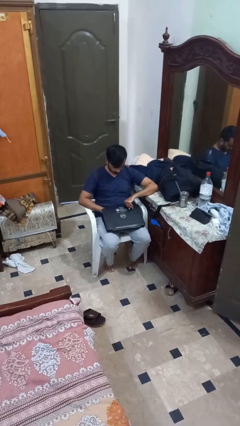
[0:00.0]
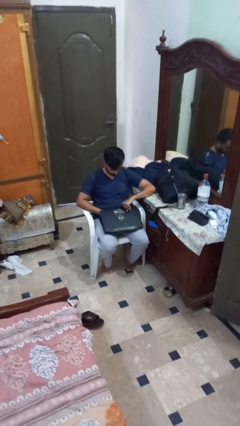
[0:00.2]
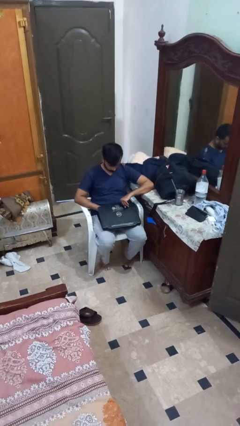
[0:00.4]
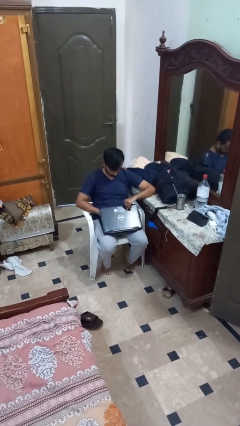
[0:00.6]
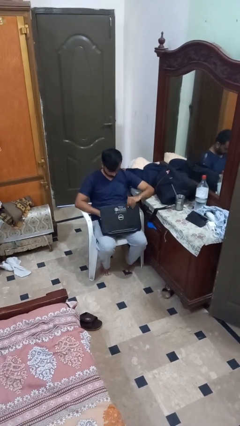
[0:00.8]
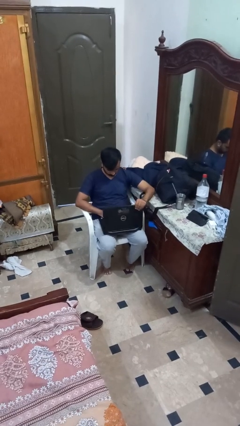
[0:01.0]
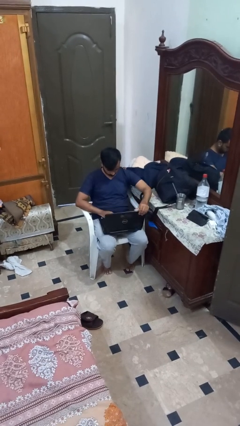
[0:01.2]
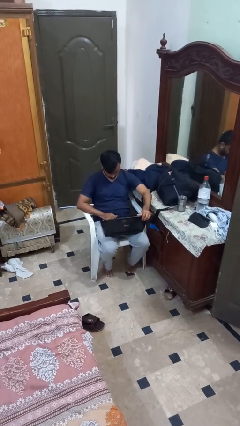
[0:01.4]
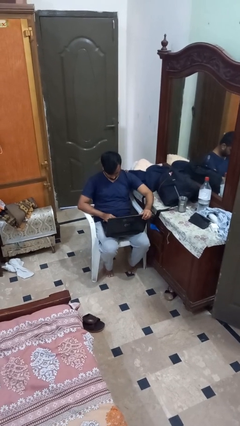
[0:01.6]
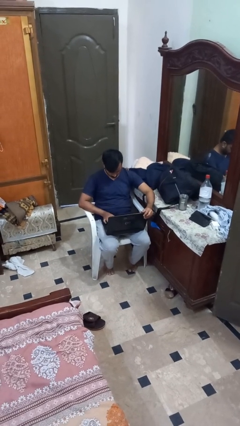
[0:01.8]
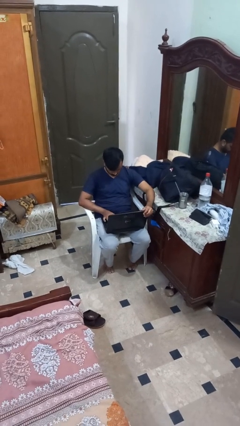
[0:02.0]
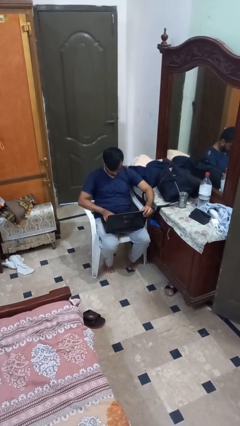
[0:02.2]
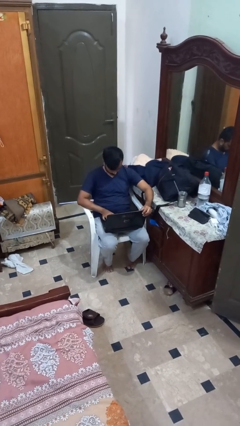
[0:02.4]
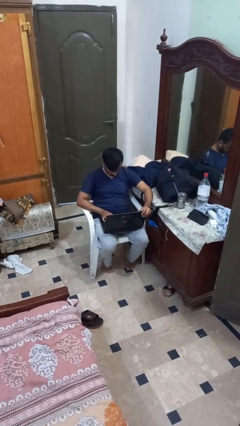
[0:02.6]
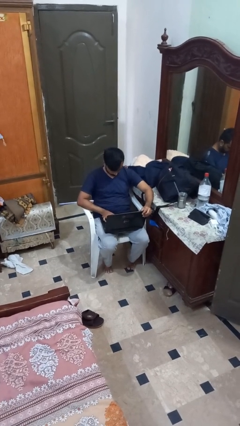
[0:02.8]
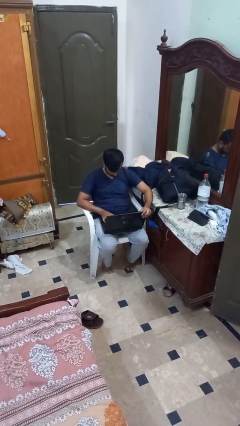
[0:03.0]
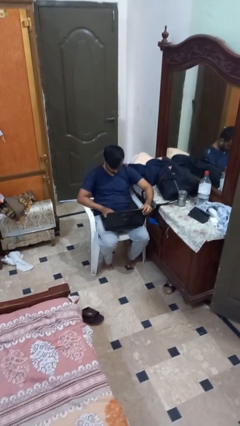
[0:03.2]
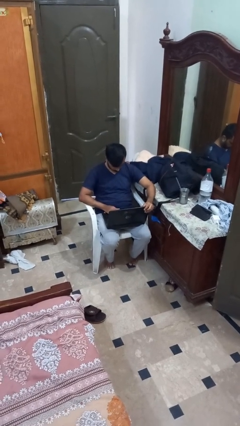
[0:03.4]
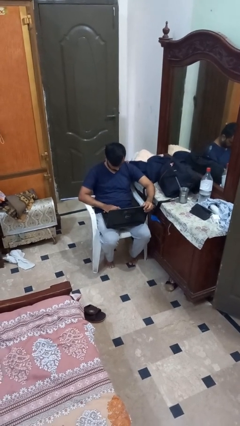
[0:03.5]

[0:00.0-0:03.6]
person opens laptop

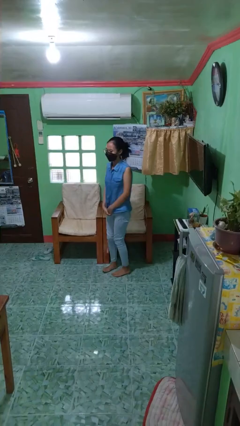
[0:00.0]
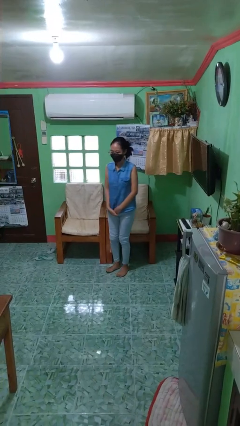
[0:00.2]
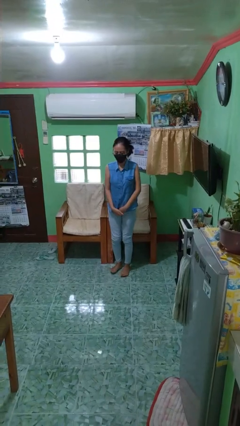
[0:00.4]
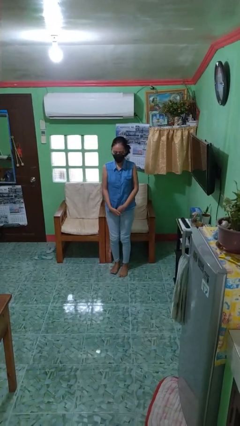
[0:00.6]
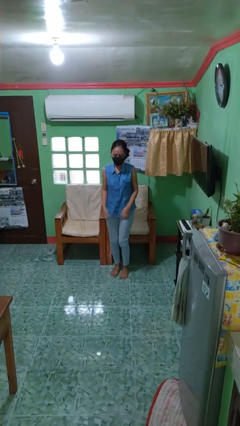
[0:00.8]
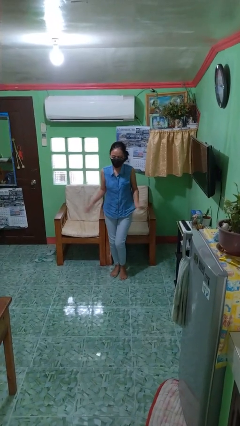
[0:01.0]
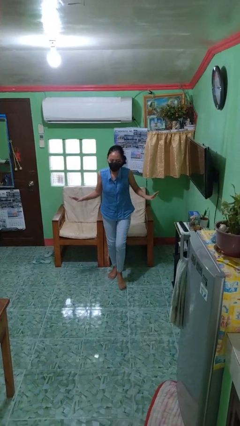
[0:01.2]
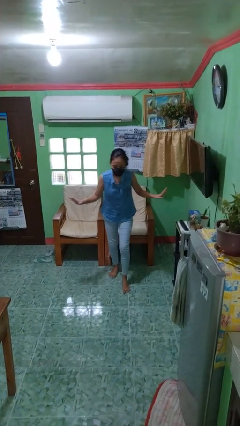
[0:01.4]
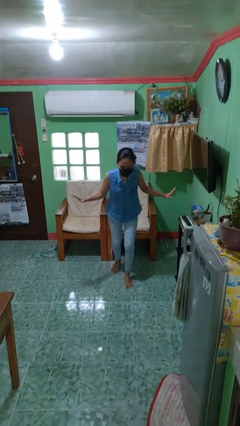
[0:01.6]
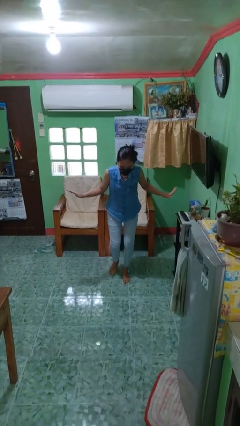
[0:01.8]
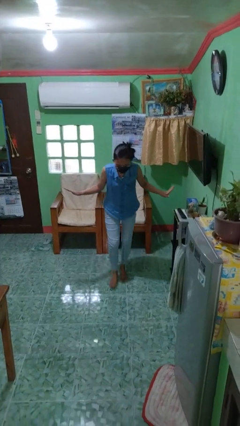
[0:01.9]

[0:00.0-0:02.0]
person walks tiptoe

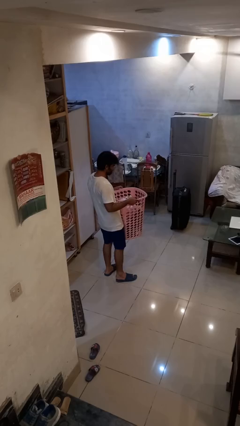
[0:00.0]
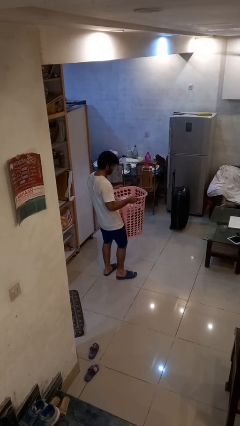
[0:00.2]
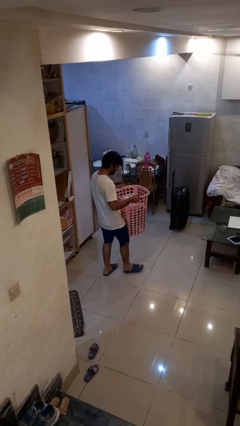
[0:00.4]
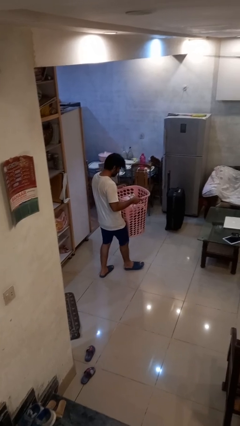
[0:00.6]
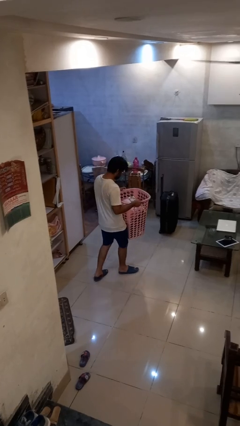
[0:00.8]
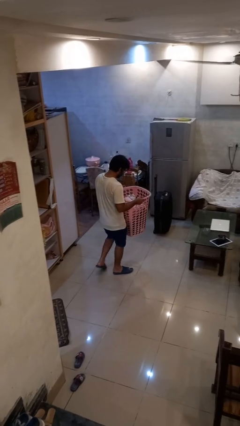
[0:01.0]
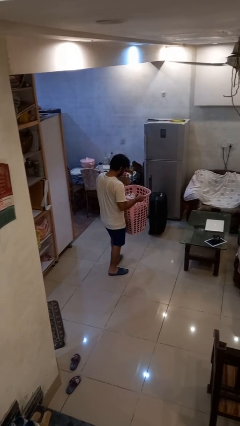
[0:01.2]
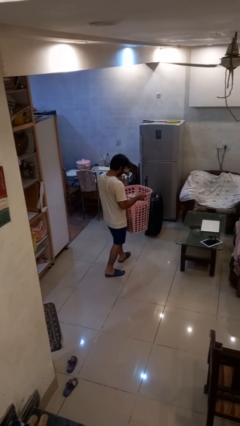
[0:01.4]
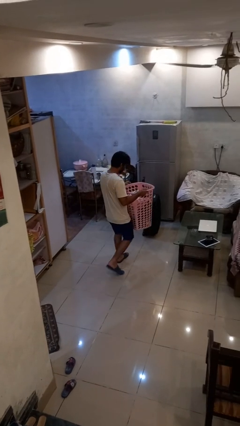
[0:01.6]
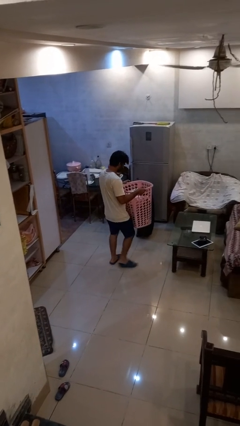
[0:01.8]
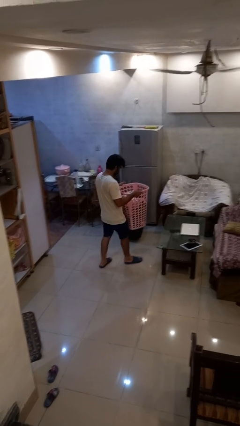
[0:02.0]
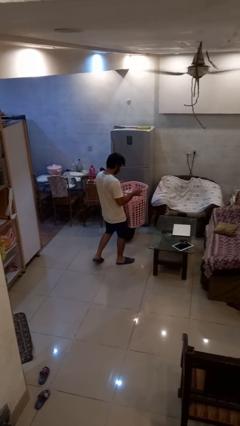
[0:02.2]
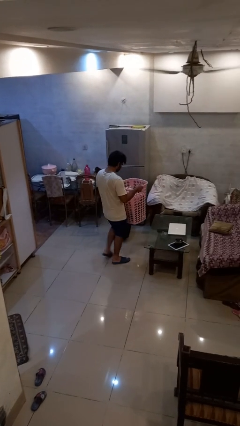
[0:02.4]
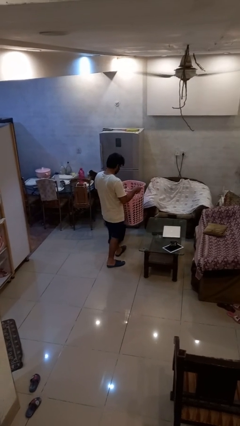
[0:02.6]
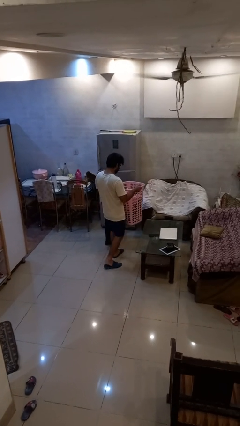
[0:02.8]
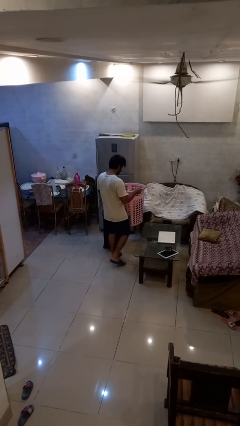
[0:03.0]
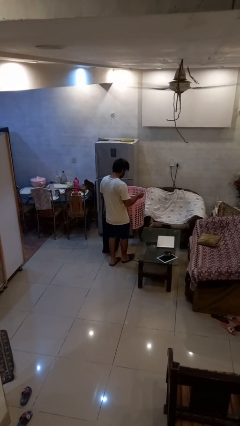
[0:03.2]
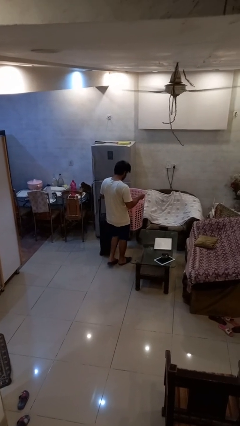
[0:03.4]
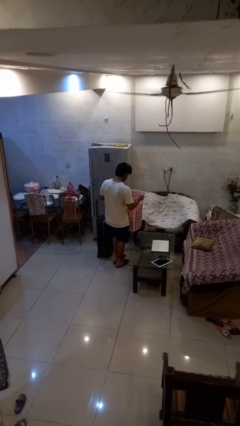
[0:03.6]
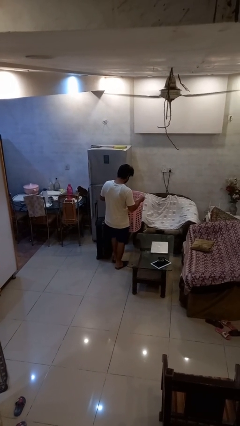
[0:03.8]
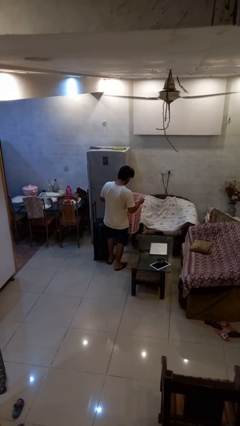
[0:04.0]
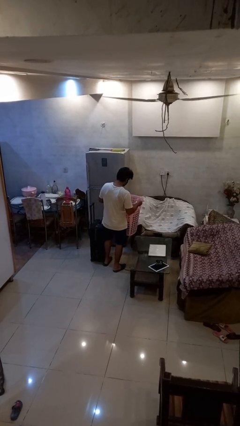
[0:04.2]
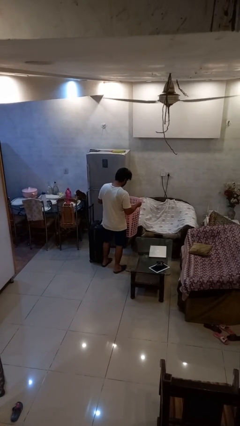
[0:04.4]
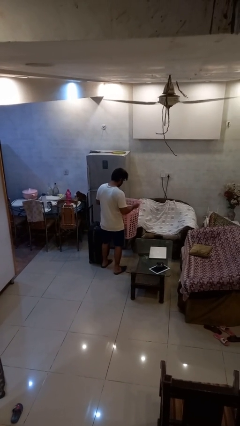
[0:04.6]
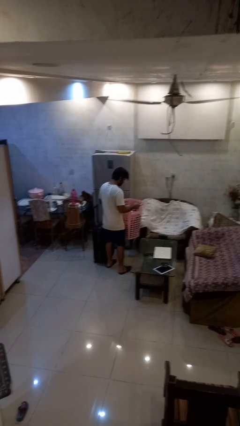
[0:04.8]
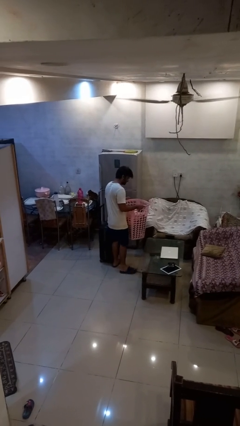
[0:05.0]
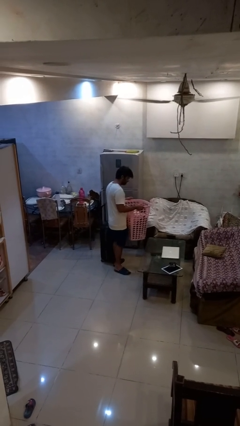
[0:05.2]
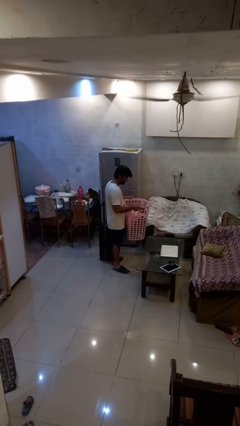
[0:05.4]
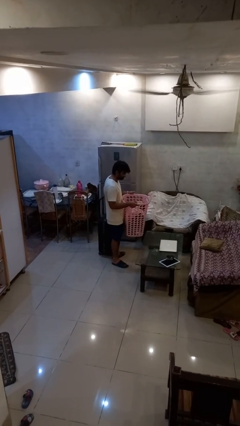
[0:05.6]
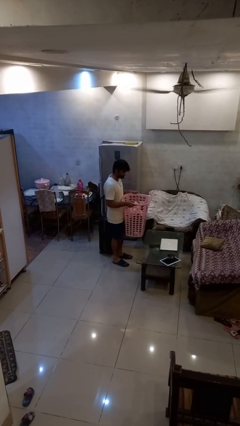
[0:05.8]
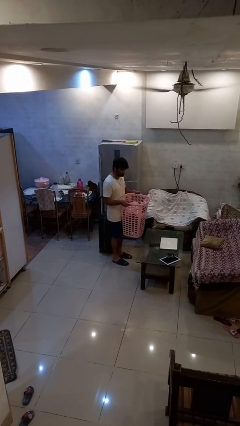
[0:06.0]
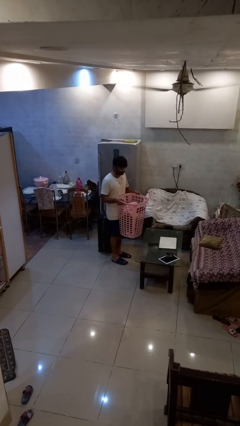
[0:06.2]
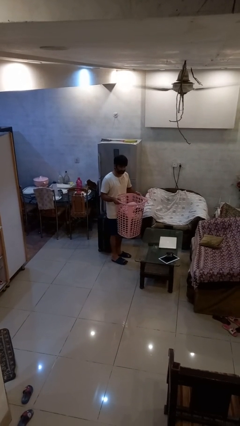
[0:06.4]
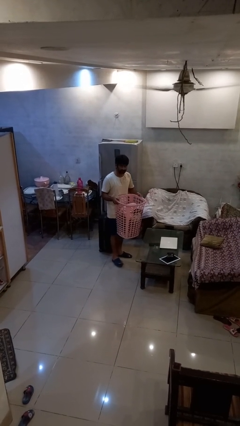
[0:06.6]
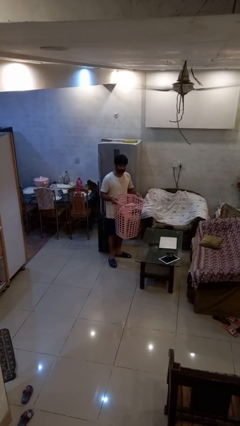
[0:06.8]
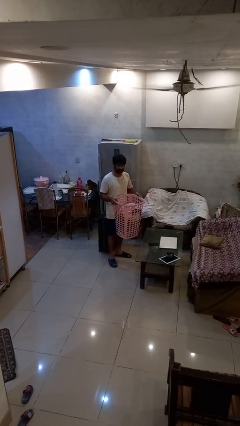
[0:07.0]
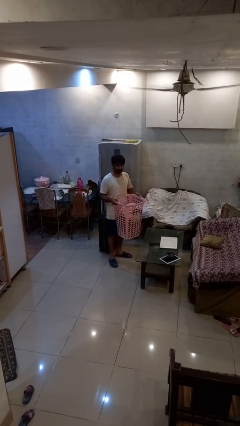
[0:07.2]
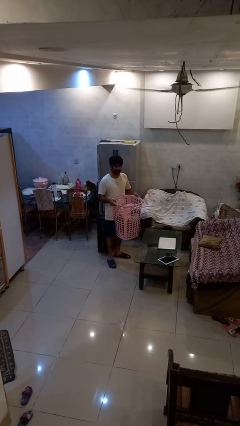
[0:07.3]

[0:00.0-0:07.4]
person carries laundry basket

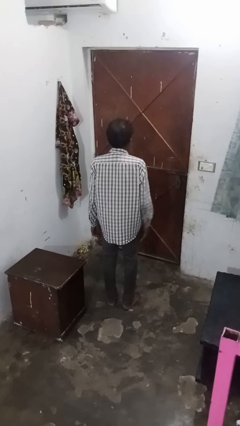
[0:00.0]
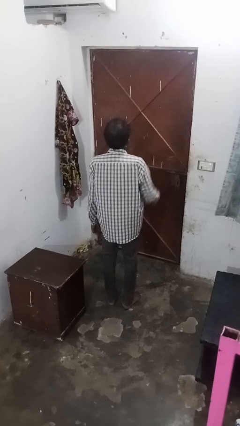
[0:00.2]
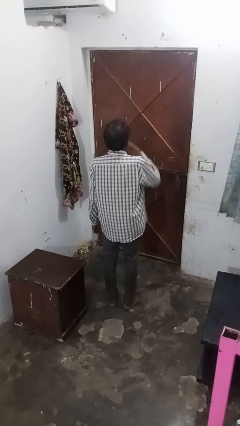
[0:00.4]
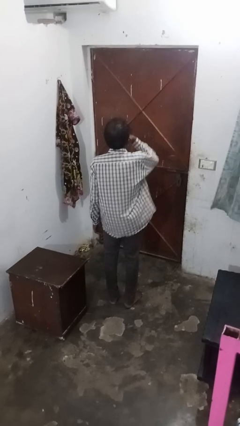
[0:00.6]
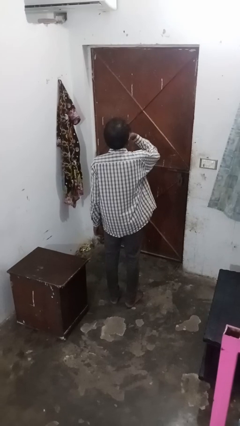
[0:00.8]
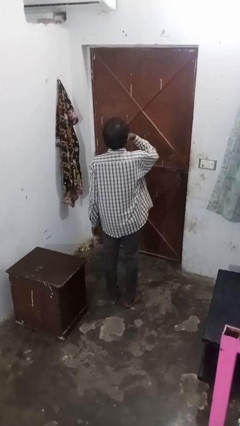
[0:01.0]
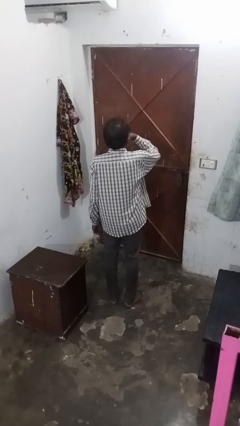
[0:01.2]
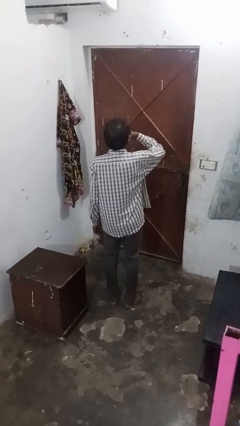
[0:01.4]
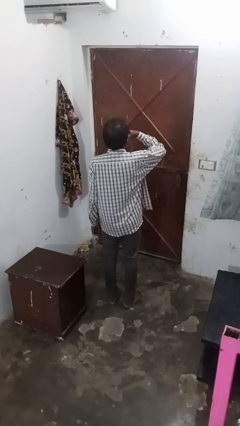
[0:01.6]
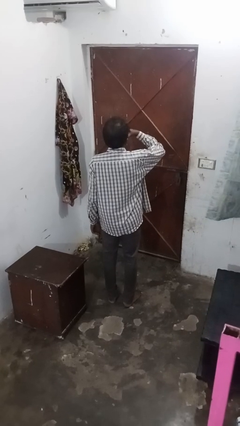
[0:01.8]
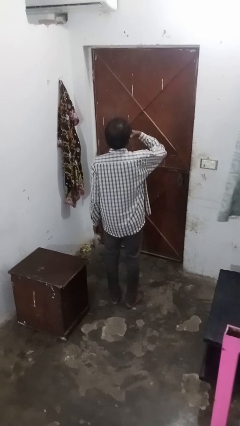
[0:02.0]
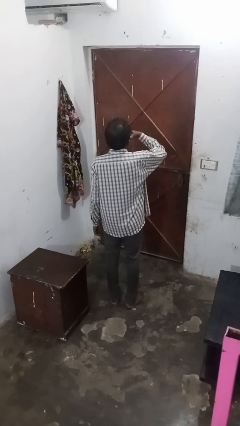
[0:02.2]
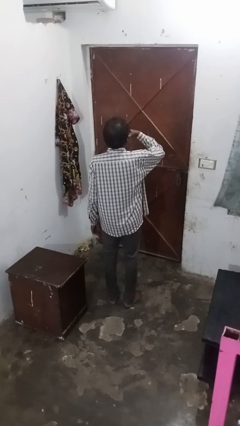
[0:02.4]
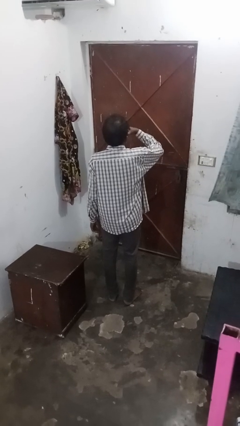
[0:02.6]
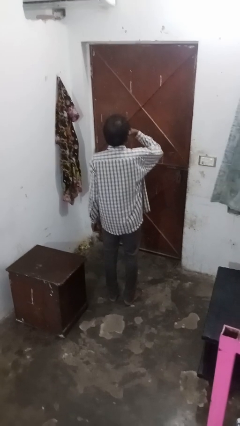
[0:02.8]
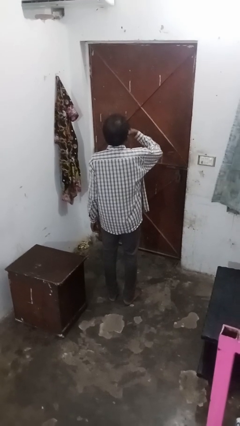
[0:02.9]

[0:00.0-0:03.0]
person strokes chin

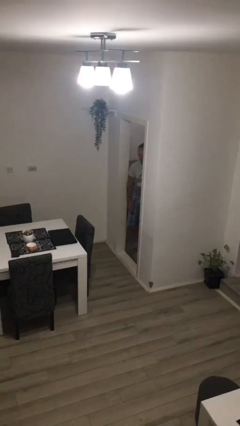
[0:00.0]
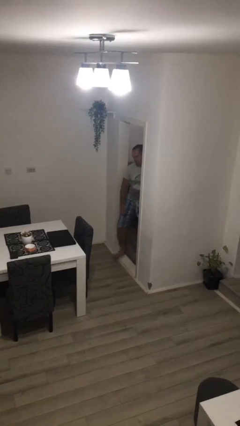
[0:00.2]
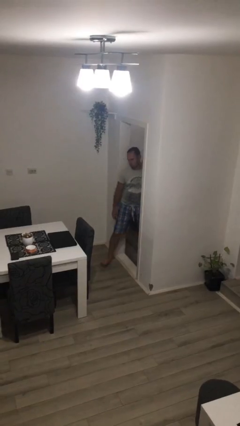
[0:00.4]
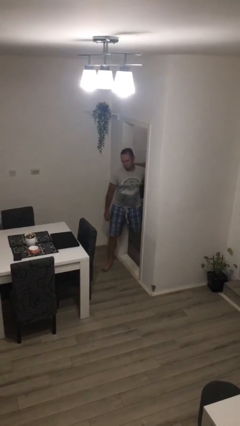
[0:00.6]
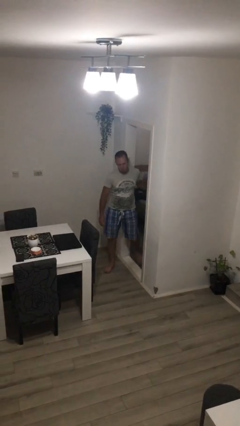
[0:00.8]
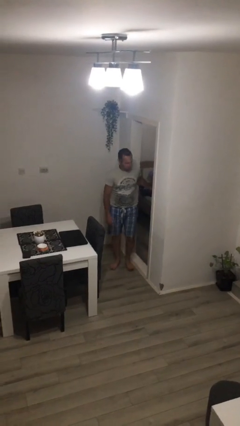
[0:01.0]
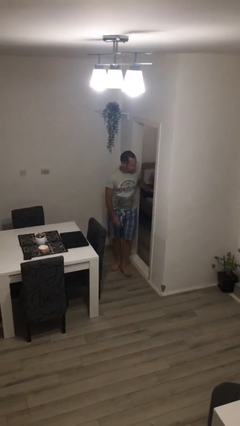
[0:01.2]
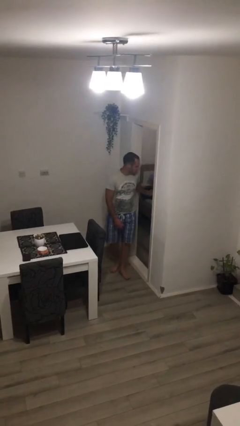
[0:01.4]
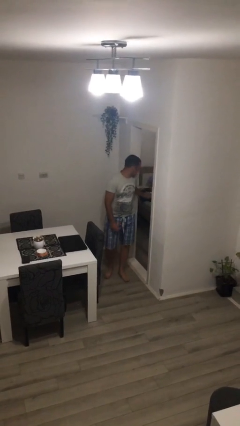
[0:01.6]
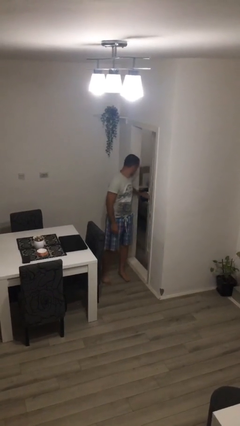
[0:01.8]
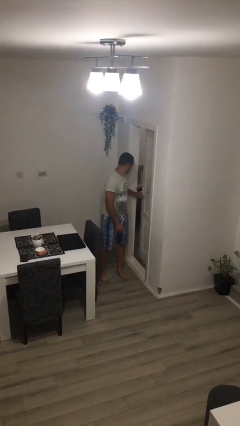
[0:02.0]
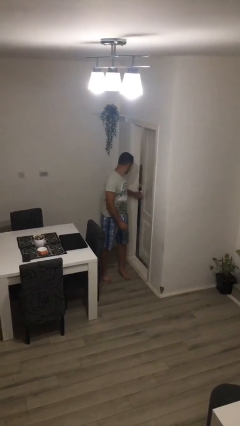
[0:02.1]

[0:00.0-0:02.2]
person enters scene through structure
